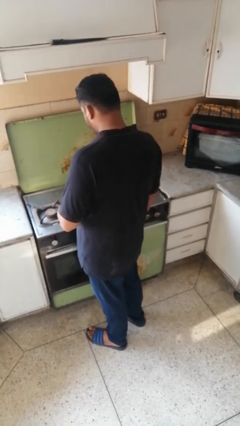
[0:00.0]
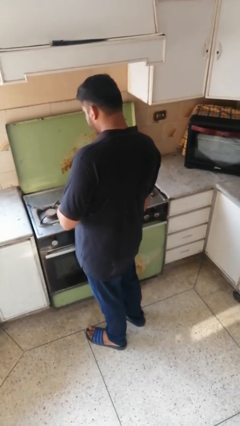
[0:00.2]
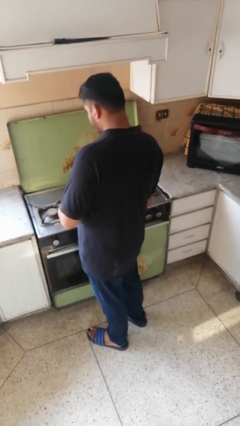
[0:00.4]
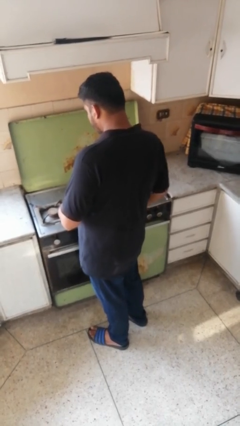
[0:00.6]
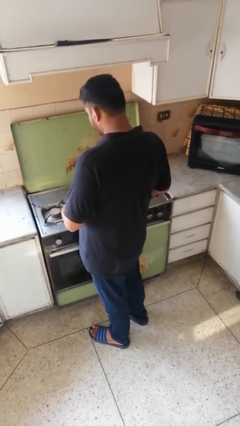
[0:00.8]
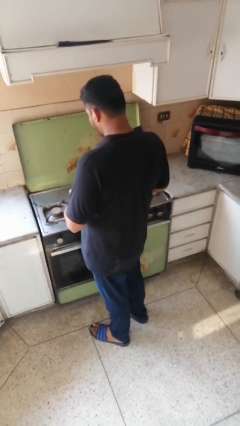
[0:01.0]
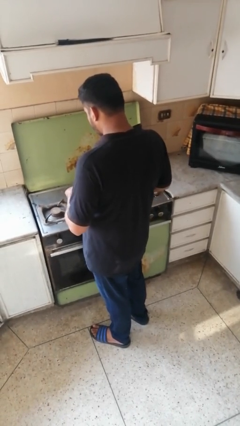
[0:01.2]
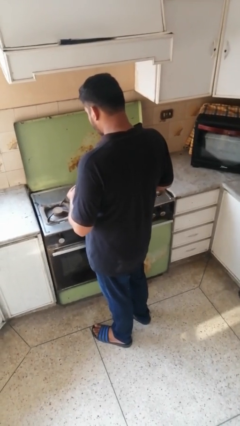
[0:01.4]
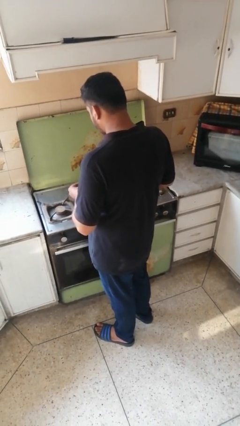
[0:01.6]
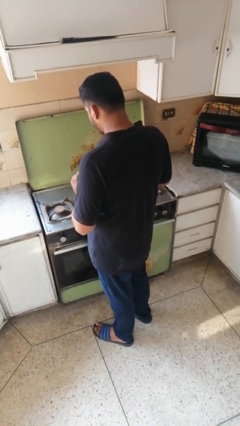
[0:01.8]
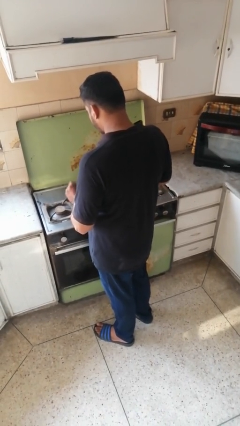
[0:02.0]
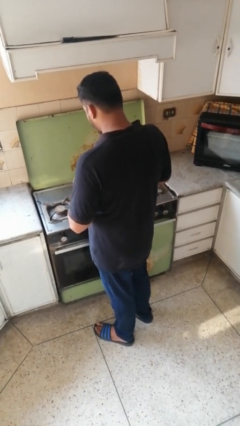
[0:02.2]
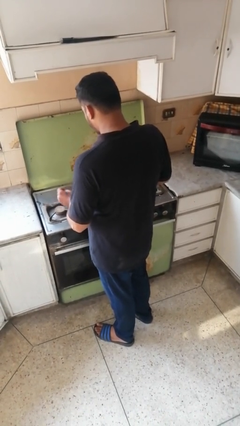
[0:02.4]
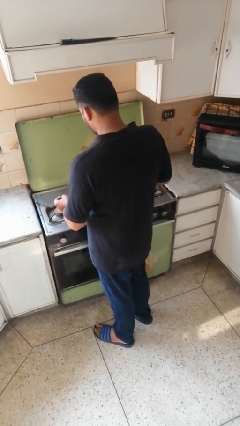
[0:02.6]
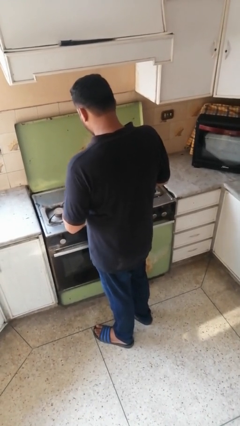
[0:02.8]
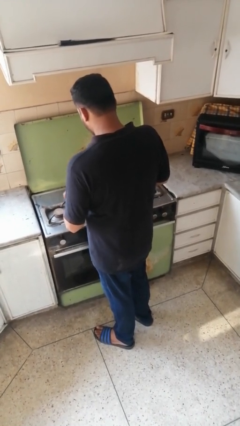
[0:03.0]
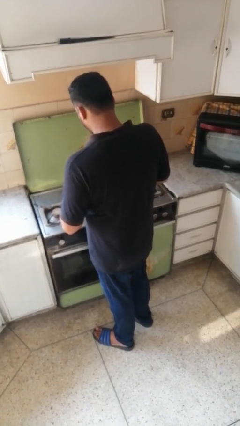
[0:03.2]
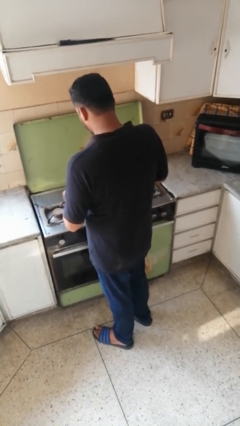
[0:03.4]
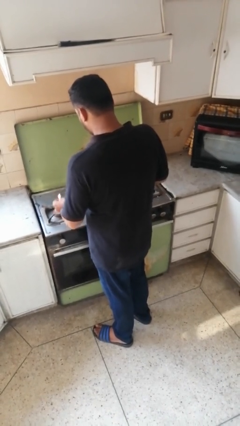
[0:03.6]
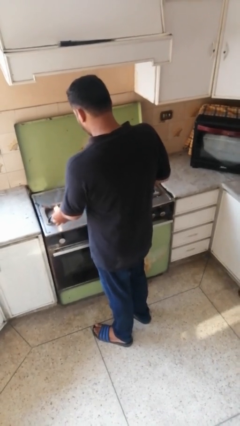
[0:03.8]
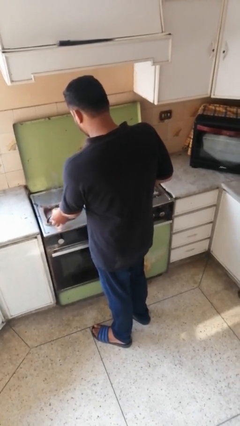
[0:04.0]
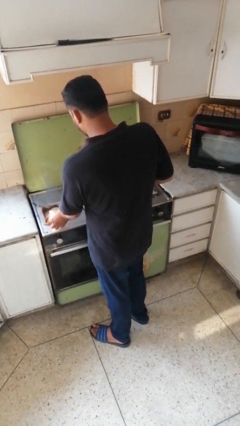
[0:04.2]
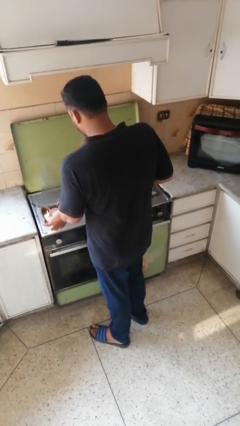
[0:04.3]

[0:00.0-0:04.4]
person turns on stovetop

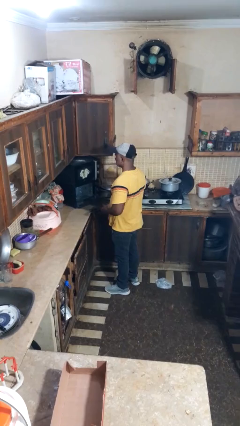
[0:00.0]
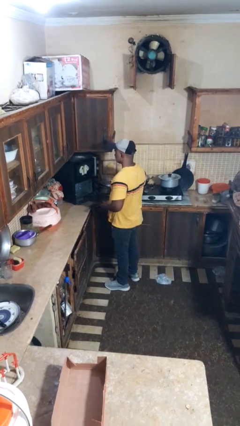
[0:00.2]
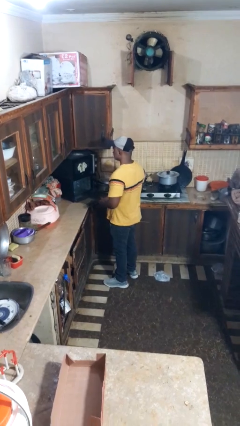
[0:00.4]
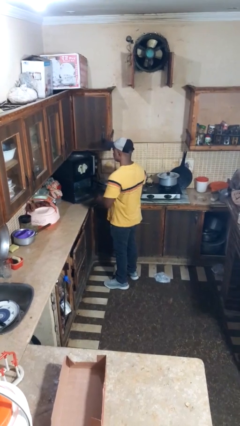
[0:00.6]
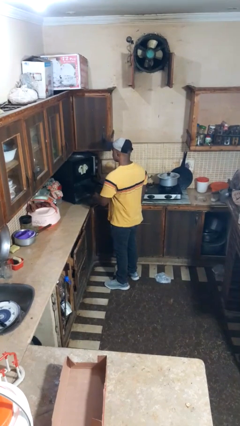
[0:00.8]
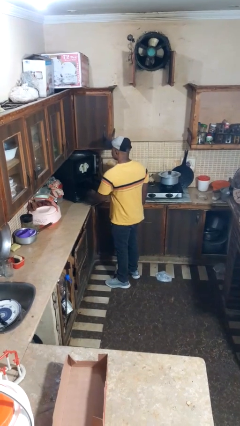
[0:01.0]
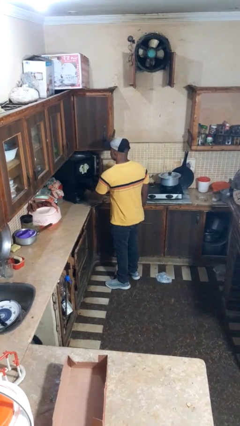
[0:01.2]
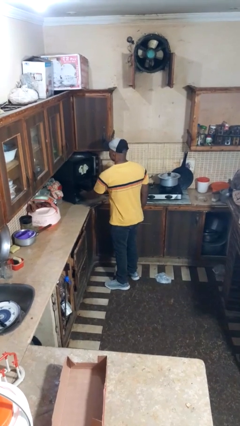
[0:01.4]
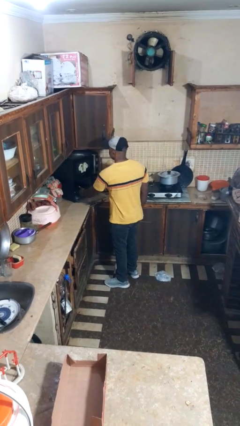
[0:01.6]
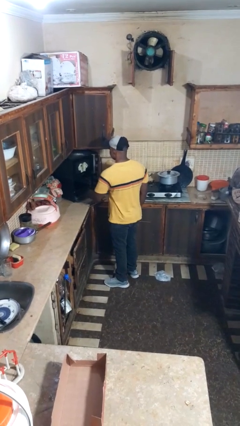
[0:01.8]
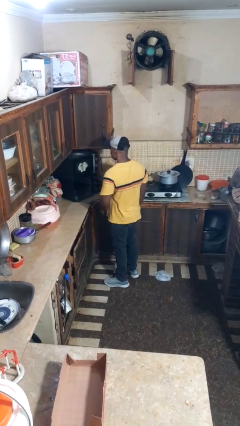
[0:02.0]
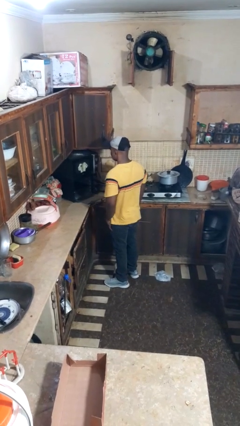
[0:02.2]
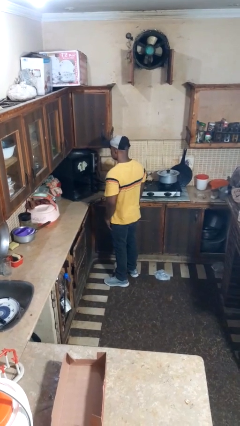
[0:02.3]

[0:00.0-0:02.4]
person puts object into oven

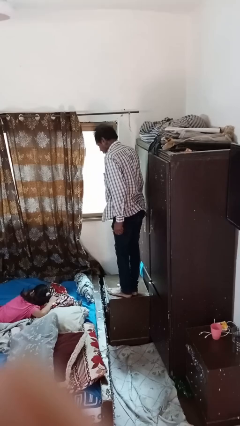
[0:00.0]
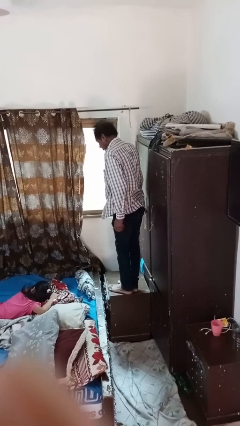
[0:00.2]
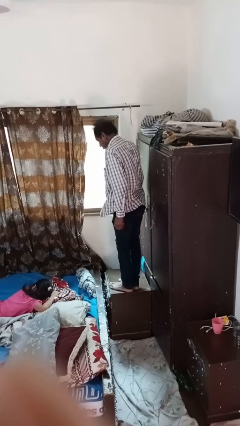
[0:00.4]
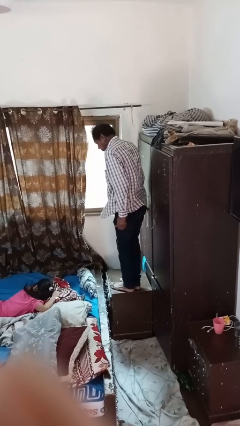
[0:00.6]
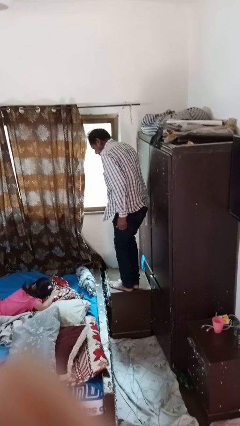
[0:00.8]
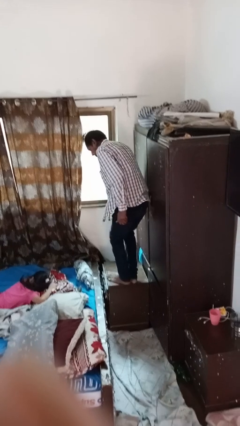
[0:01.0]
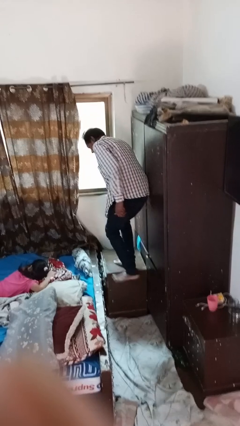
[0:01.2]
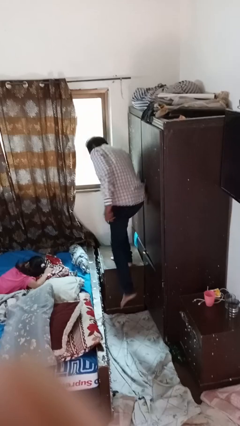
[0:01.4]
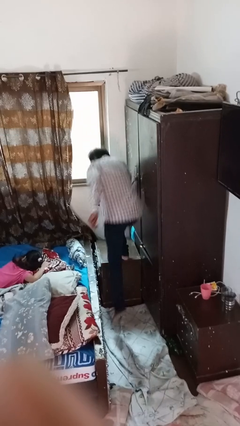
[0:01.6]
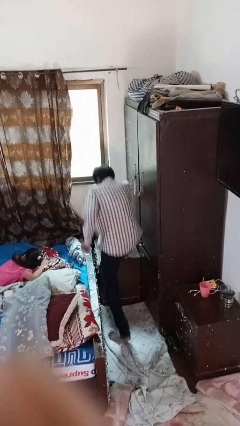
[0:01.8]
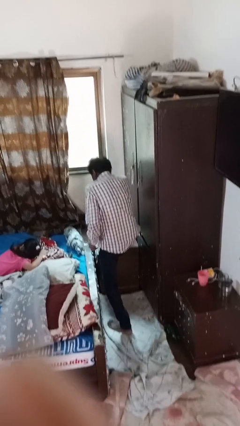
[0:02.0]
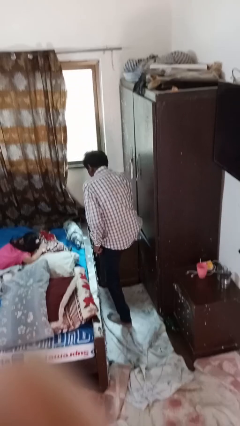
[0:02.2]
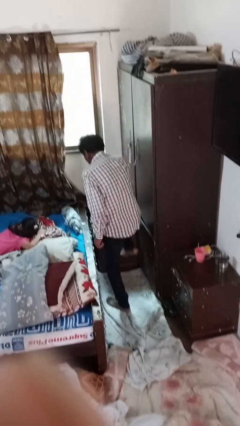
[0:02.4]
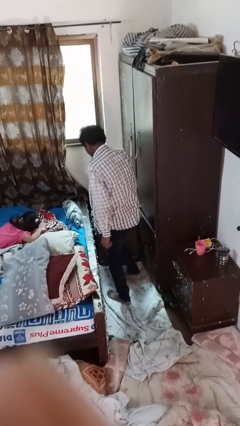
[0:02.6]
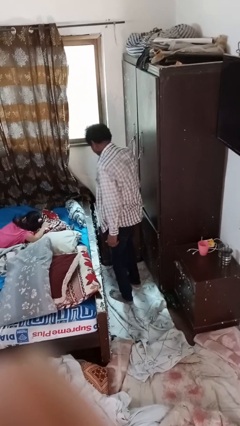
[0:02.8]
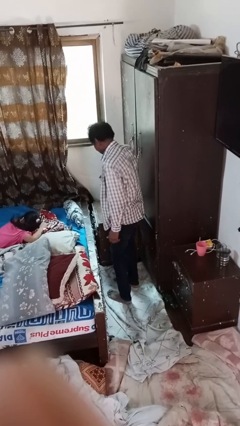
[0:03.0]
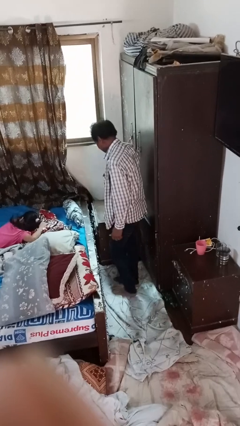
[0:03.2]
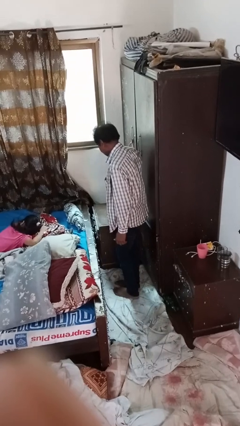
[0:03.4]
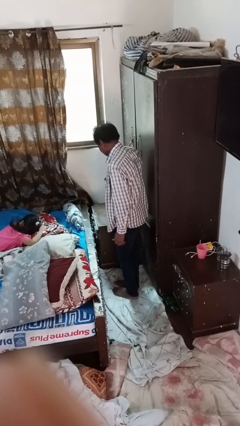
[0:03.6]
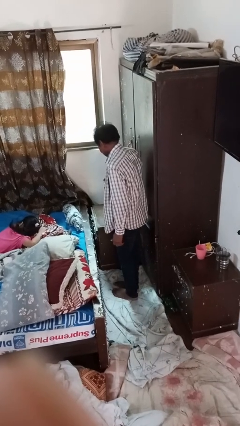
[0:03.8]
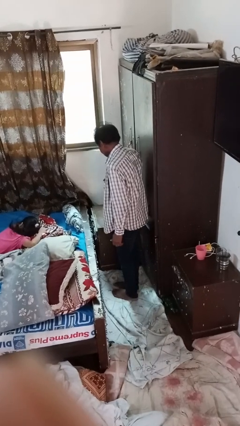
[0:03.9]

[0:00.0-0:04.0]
person climbs off table

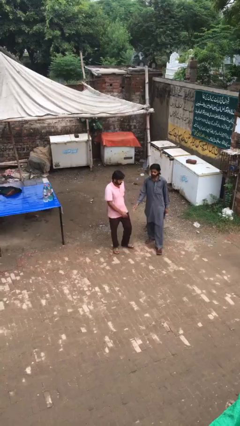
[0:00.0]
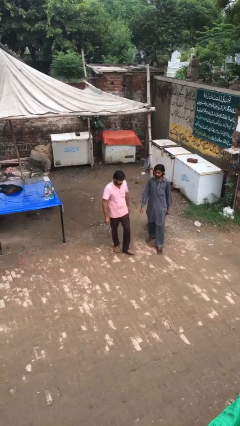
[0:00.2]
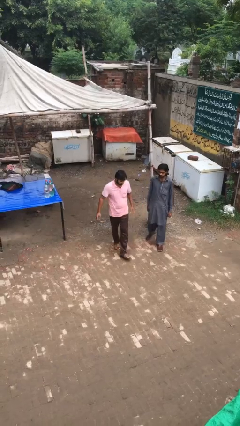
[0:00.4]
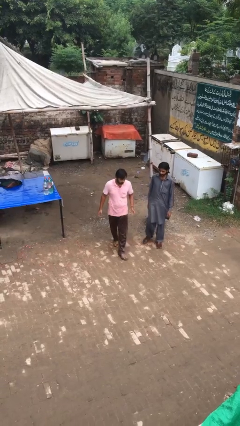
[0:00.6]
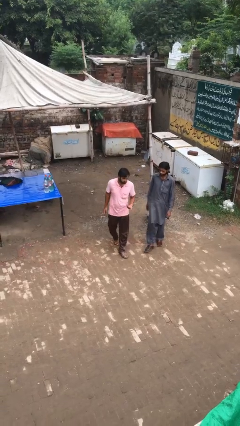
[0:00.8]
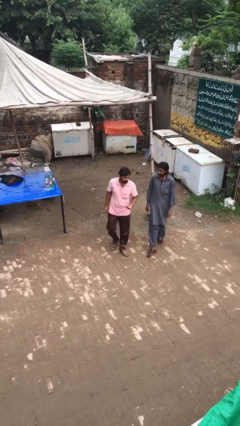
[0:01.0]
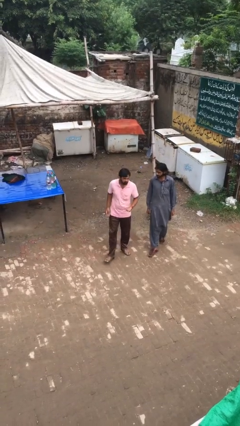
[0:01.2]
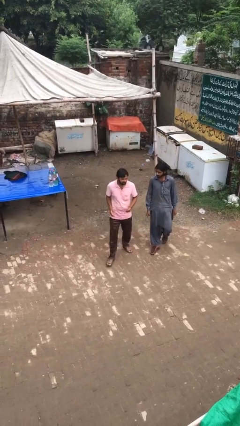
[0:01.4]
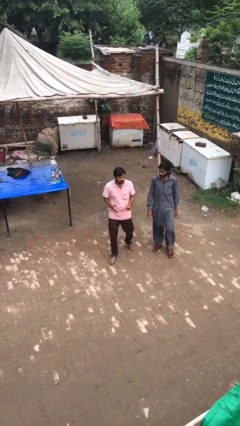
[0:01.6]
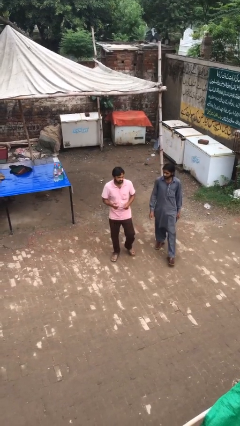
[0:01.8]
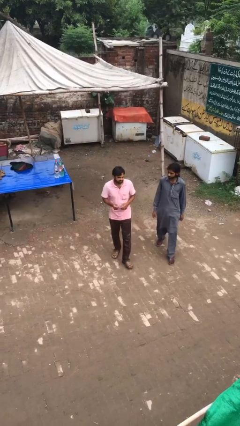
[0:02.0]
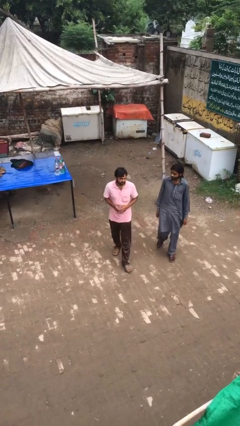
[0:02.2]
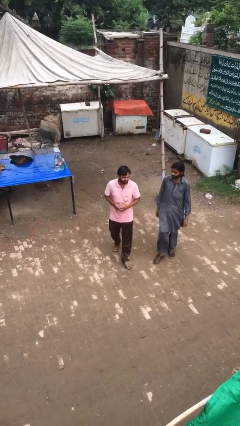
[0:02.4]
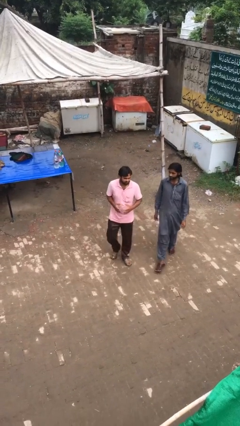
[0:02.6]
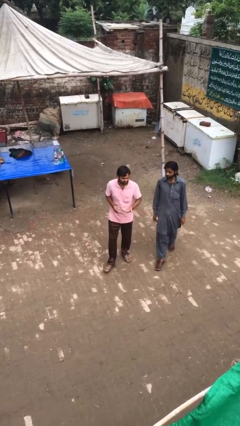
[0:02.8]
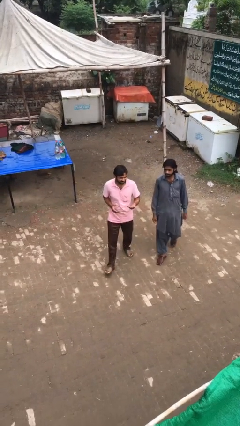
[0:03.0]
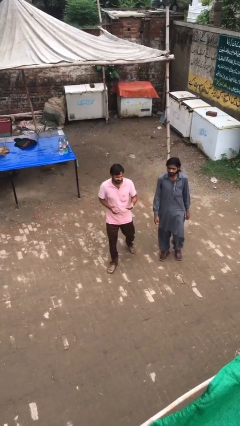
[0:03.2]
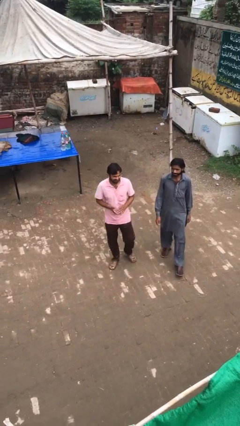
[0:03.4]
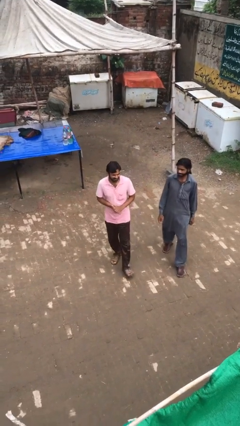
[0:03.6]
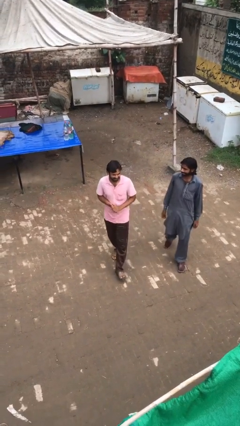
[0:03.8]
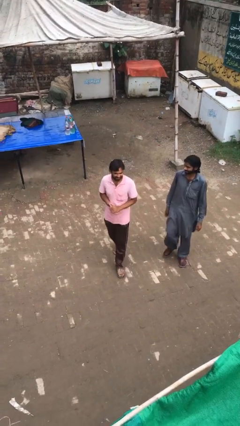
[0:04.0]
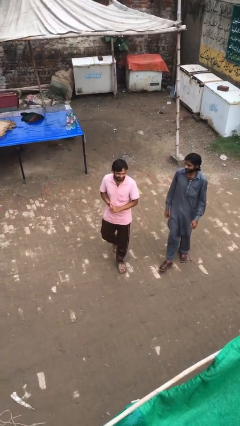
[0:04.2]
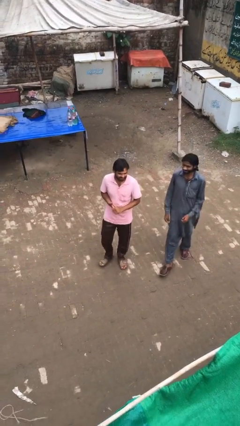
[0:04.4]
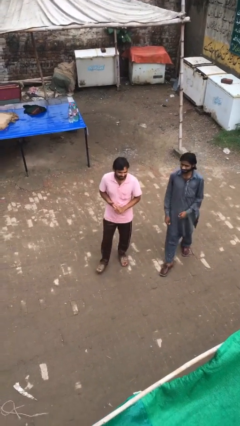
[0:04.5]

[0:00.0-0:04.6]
person talks to person

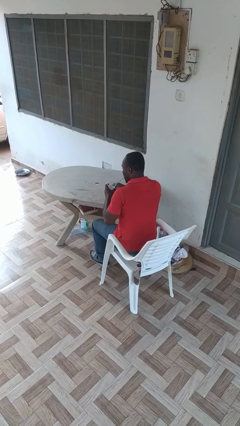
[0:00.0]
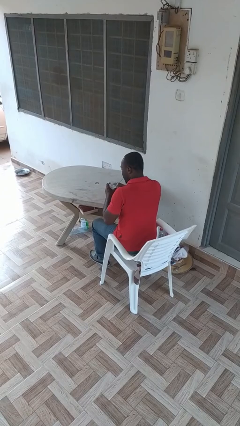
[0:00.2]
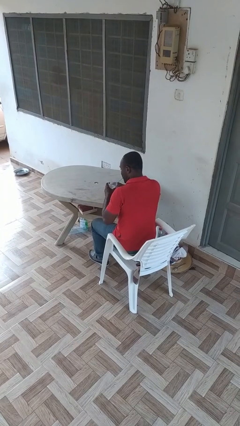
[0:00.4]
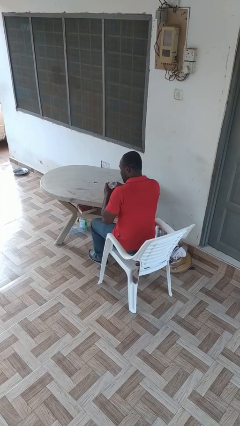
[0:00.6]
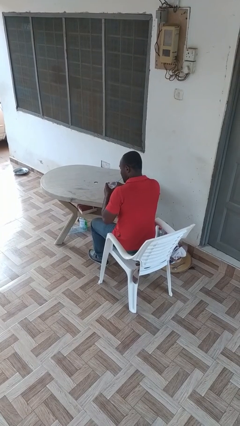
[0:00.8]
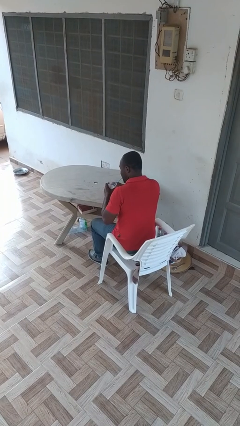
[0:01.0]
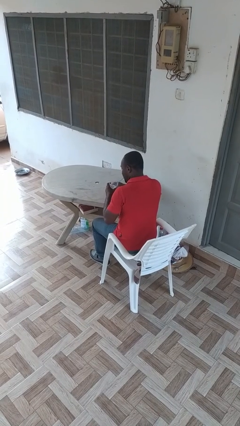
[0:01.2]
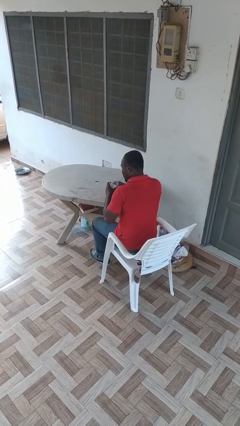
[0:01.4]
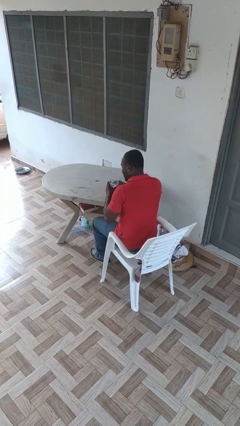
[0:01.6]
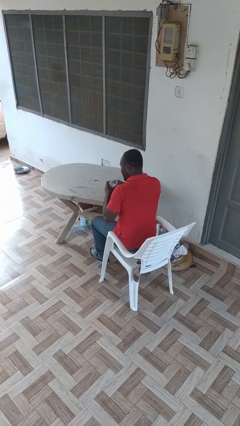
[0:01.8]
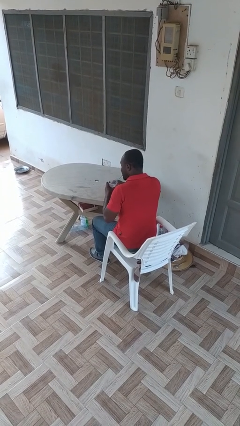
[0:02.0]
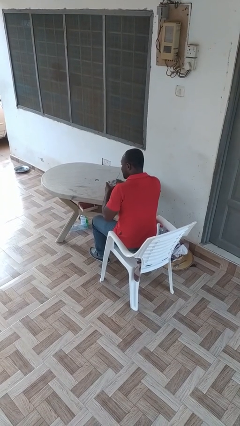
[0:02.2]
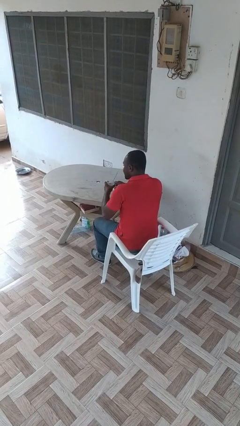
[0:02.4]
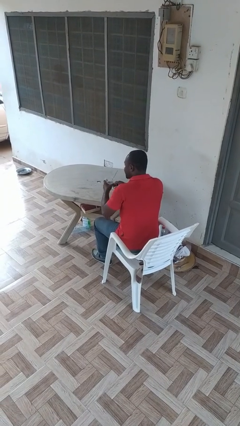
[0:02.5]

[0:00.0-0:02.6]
person drinks from straw
